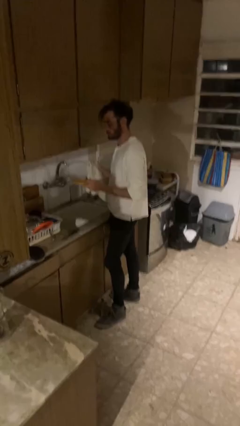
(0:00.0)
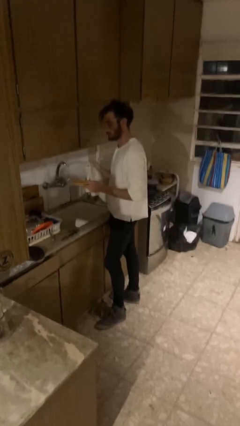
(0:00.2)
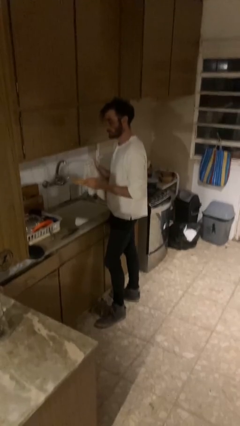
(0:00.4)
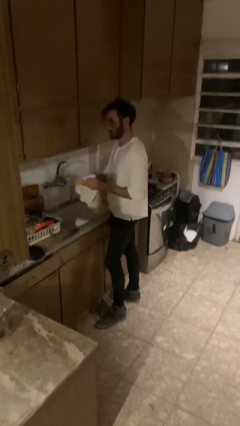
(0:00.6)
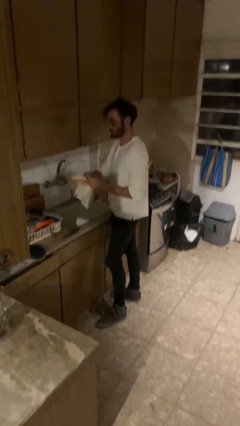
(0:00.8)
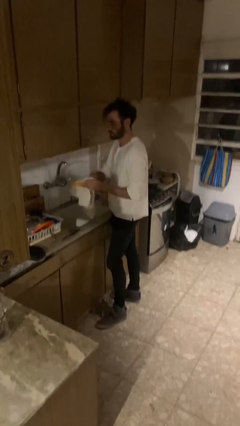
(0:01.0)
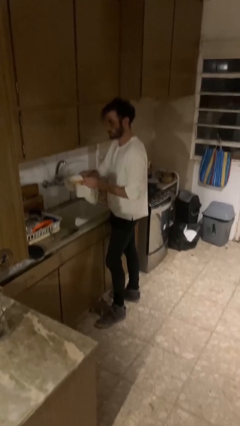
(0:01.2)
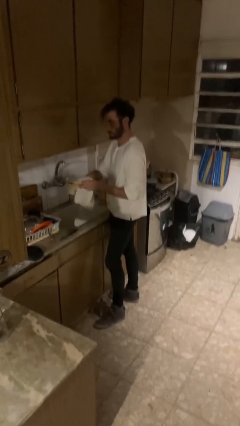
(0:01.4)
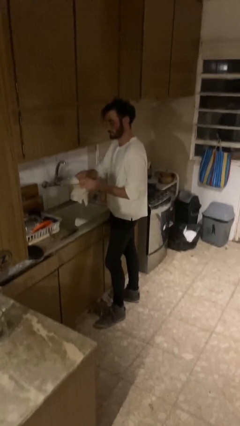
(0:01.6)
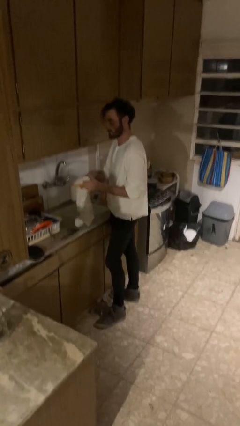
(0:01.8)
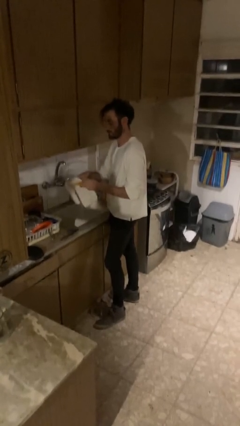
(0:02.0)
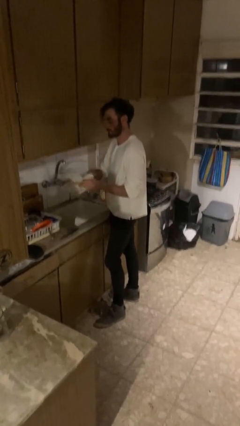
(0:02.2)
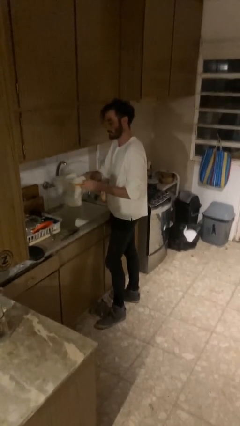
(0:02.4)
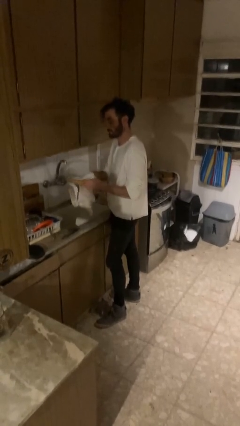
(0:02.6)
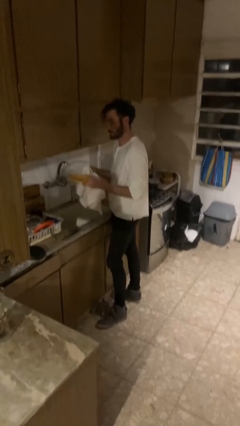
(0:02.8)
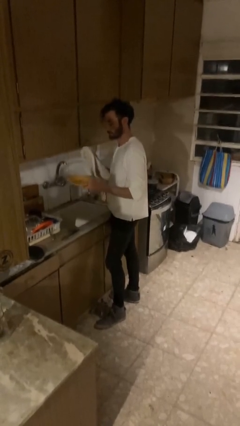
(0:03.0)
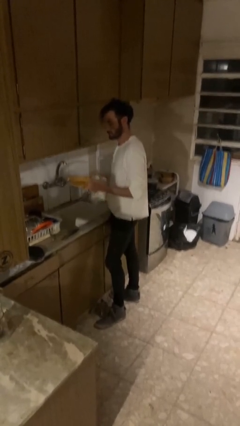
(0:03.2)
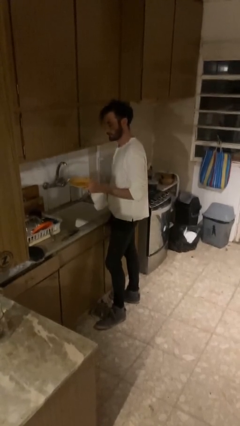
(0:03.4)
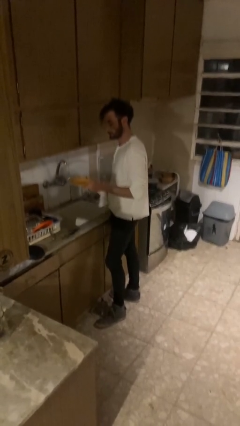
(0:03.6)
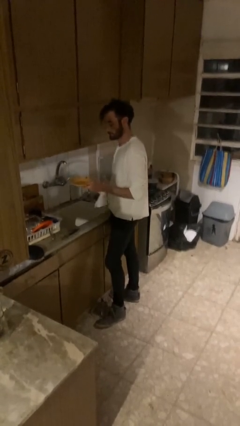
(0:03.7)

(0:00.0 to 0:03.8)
person dries dish

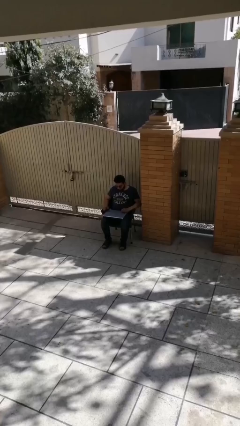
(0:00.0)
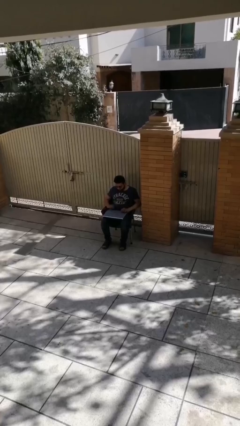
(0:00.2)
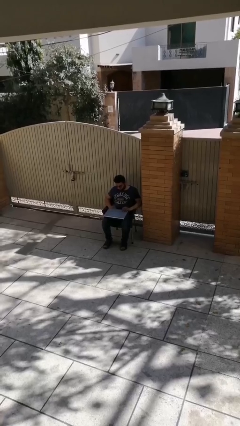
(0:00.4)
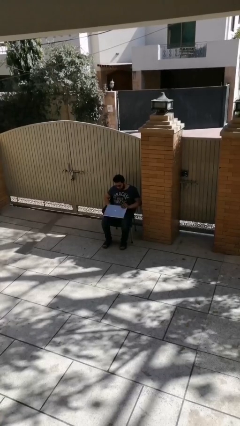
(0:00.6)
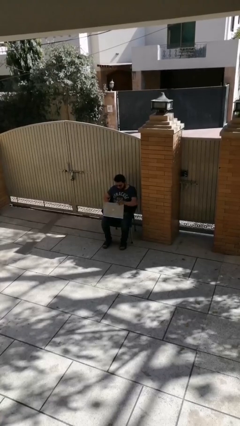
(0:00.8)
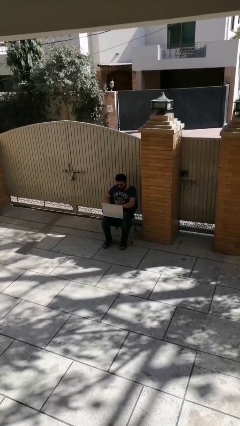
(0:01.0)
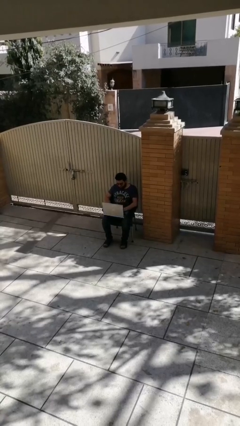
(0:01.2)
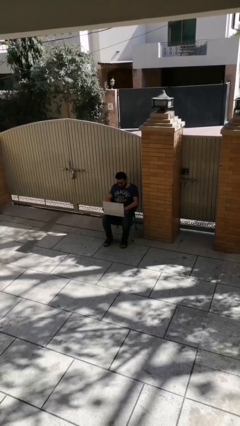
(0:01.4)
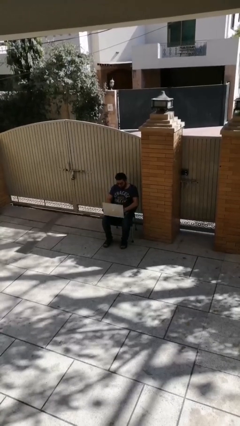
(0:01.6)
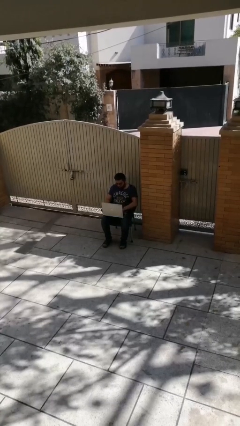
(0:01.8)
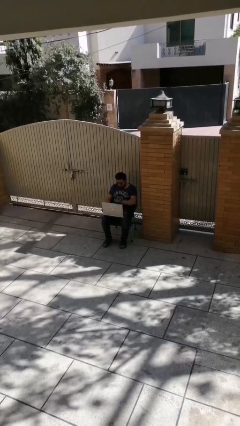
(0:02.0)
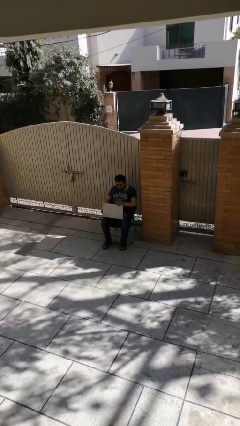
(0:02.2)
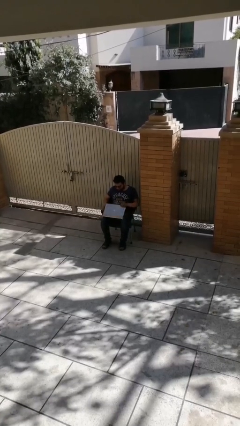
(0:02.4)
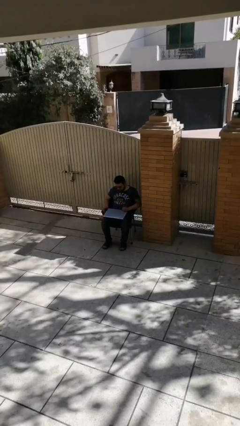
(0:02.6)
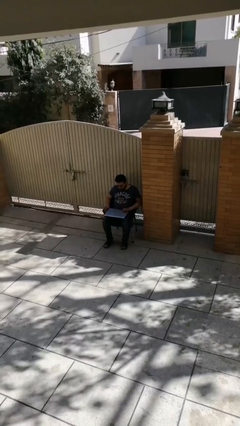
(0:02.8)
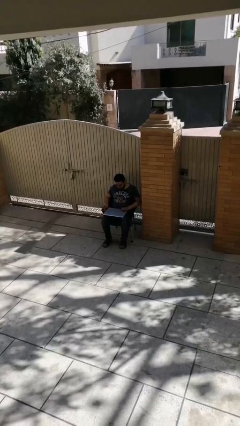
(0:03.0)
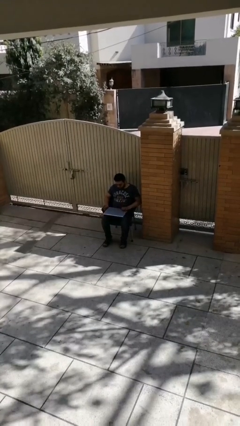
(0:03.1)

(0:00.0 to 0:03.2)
person interacts with laptop

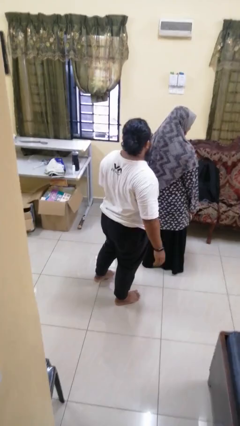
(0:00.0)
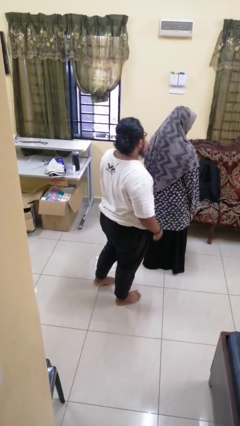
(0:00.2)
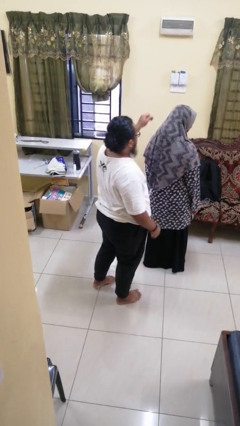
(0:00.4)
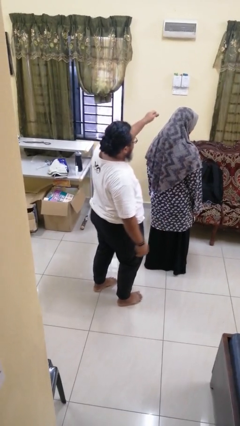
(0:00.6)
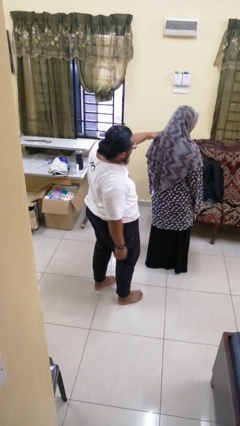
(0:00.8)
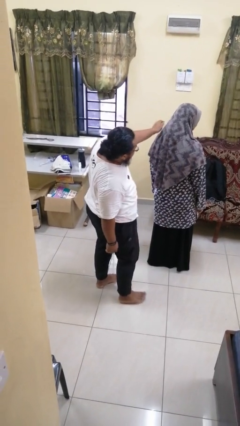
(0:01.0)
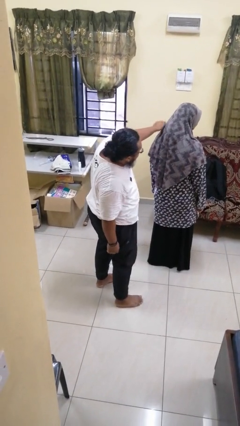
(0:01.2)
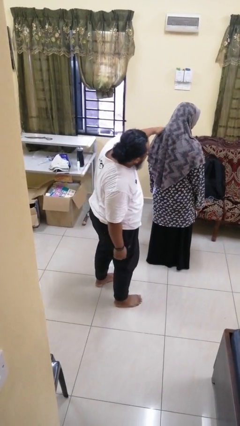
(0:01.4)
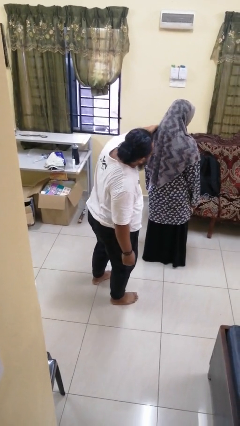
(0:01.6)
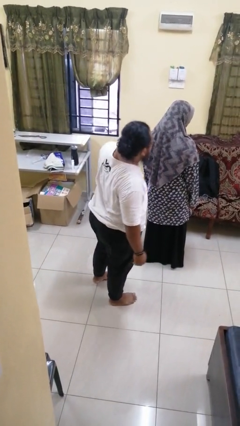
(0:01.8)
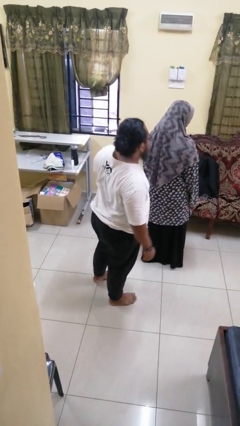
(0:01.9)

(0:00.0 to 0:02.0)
person touches back of person

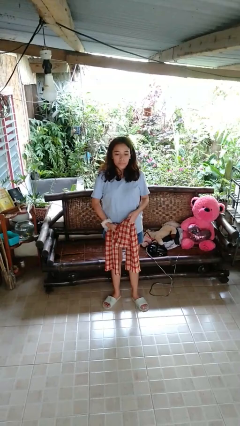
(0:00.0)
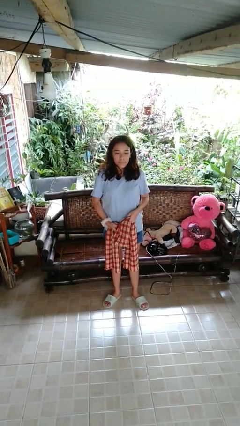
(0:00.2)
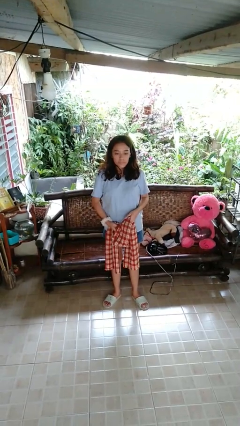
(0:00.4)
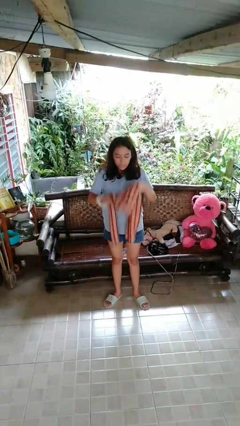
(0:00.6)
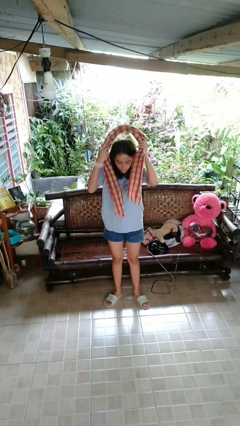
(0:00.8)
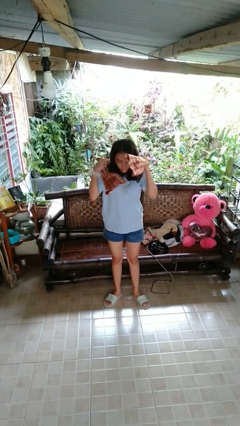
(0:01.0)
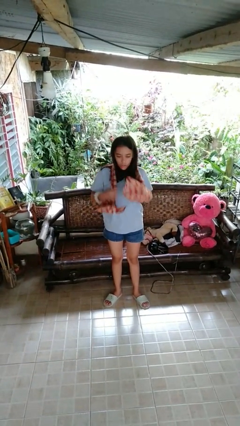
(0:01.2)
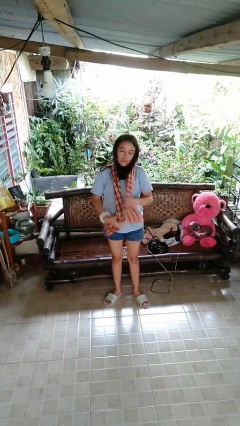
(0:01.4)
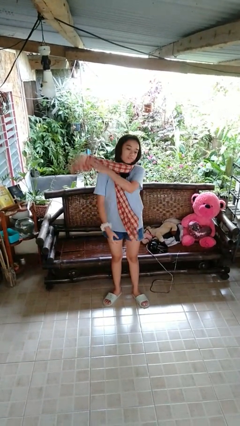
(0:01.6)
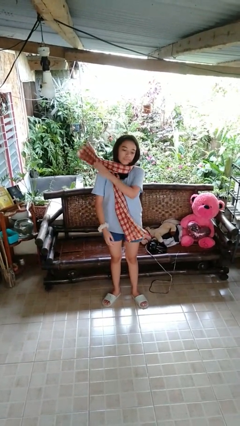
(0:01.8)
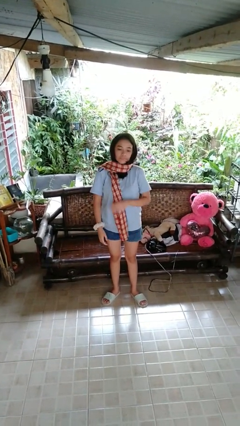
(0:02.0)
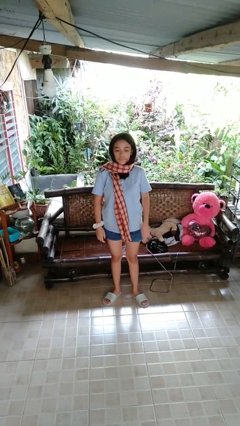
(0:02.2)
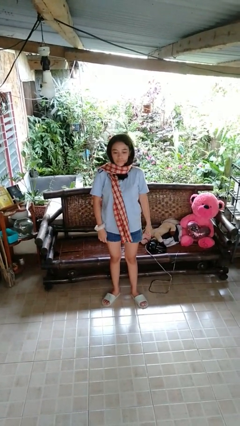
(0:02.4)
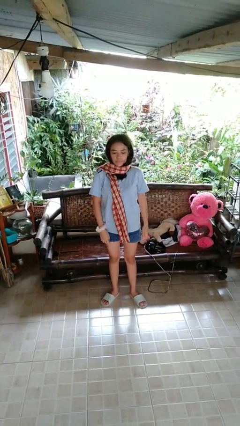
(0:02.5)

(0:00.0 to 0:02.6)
person puts on scarf

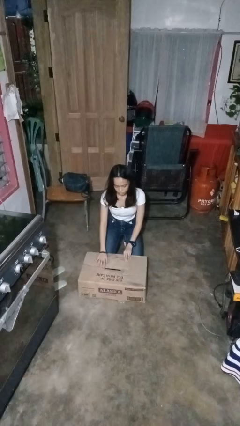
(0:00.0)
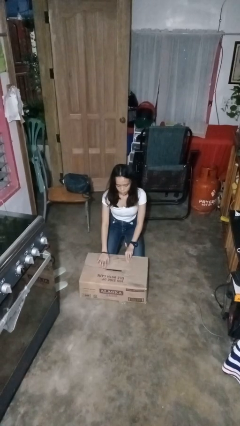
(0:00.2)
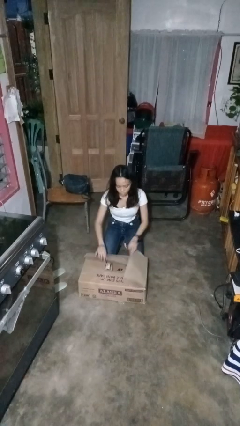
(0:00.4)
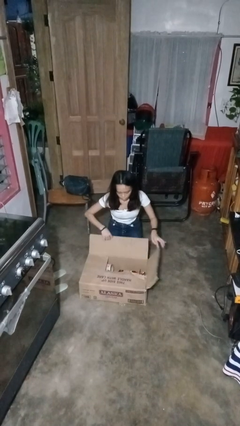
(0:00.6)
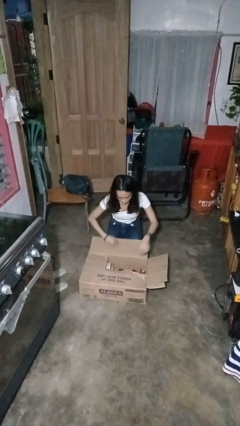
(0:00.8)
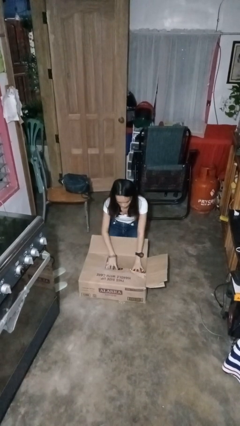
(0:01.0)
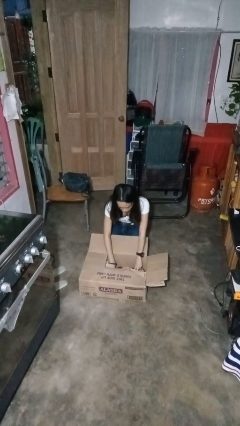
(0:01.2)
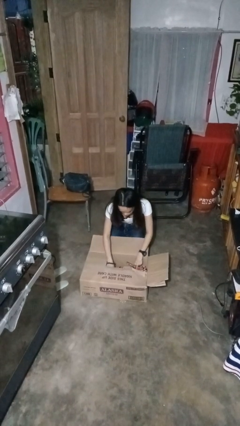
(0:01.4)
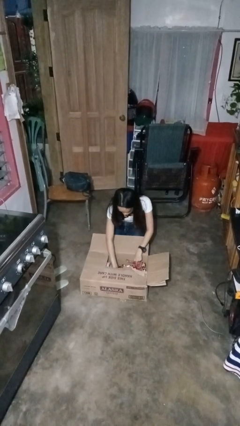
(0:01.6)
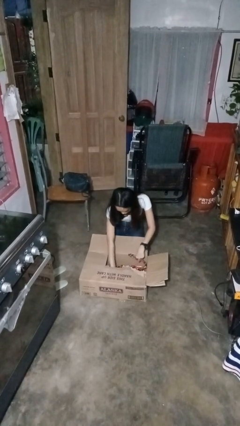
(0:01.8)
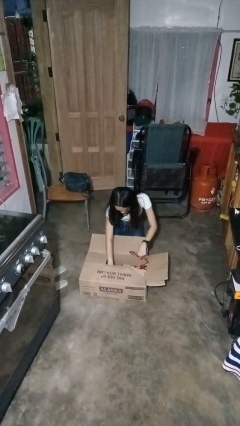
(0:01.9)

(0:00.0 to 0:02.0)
person searches in box

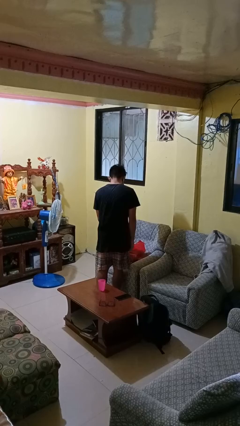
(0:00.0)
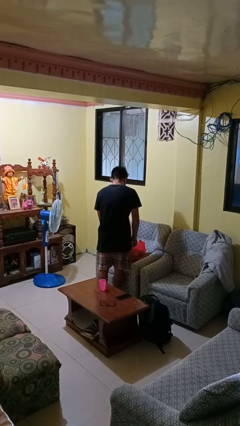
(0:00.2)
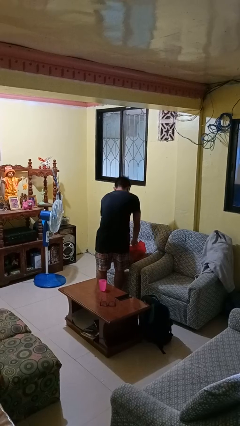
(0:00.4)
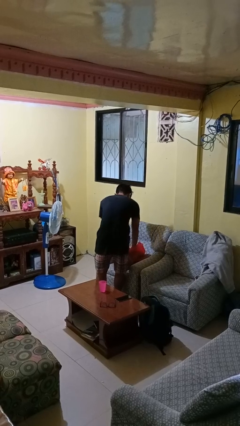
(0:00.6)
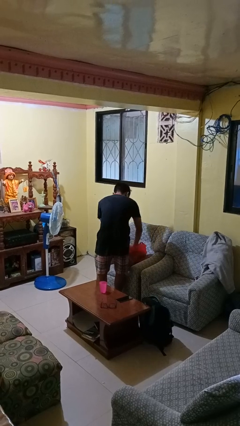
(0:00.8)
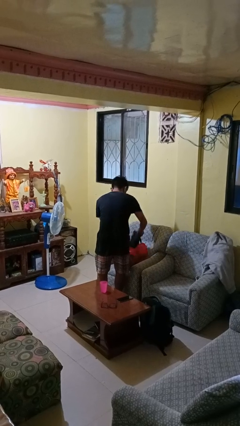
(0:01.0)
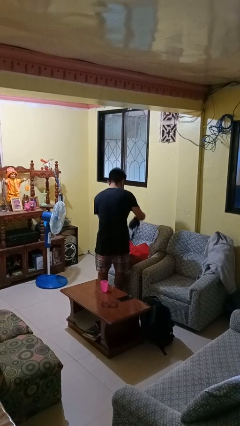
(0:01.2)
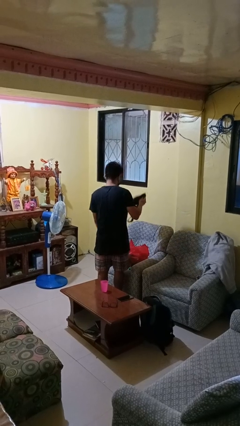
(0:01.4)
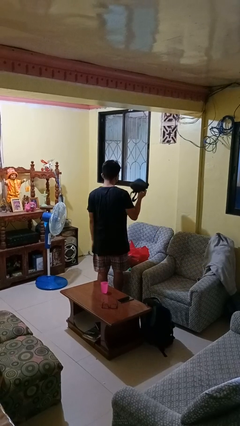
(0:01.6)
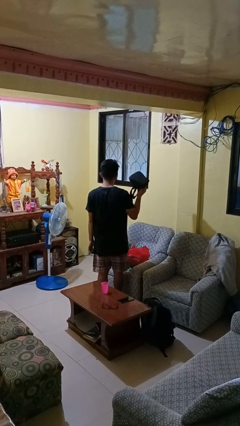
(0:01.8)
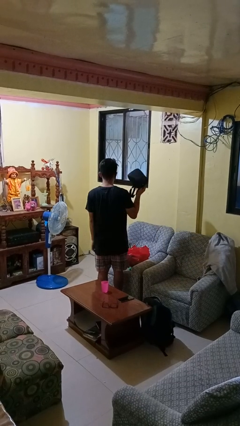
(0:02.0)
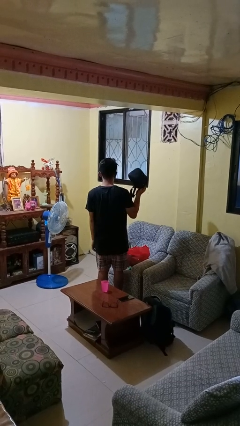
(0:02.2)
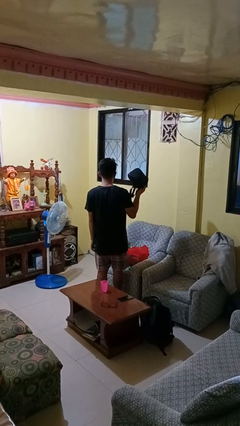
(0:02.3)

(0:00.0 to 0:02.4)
person takes object from bag

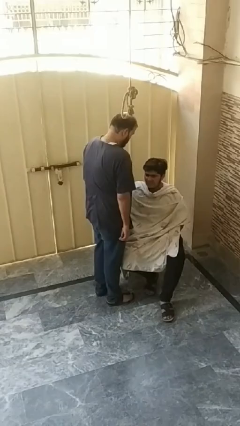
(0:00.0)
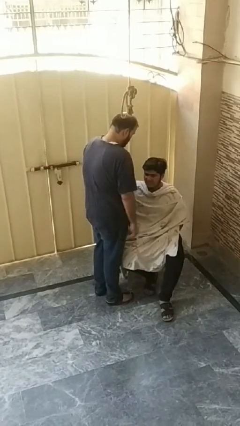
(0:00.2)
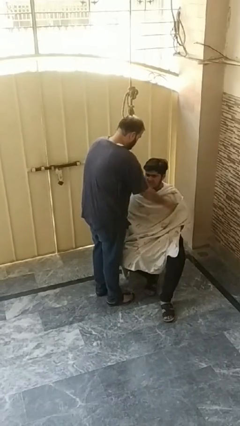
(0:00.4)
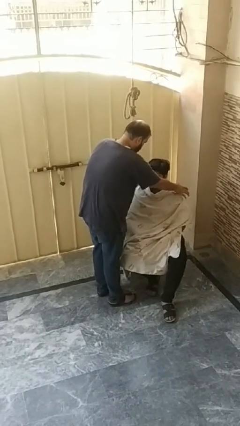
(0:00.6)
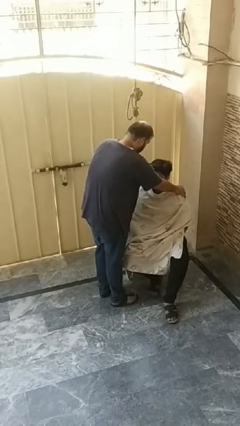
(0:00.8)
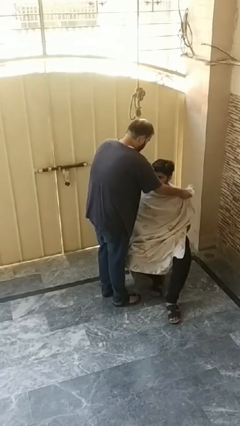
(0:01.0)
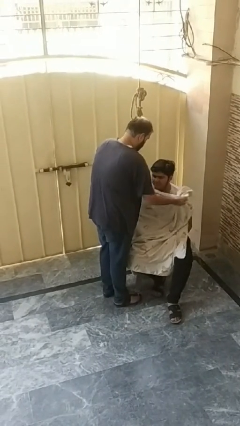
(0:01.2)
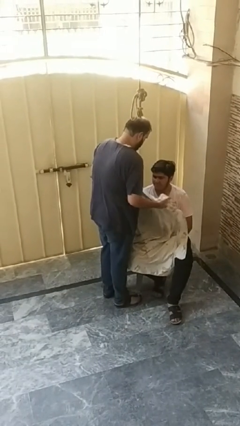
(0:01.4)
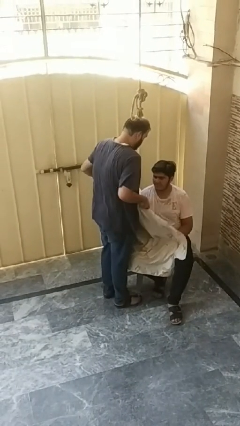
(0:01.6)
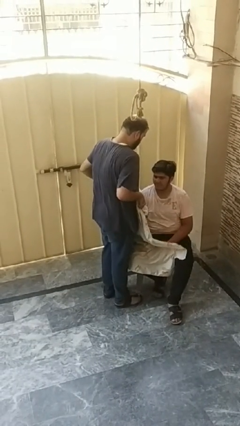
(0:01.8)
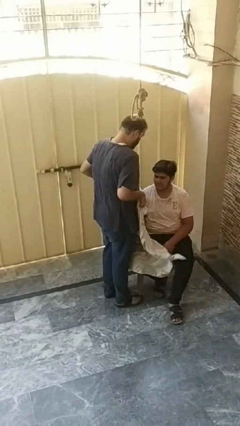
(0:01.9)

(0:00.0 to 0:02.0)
person uncovers friend with blanket
